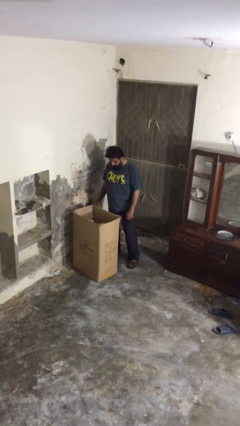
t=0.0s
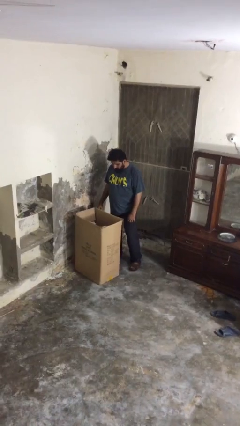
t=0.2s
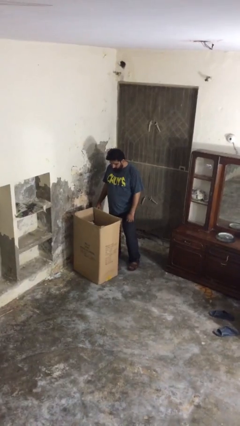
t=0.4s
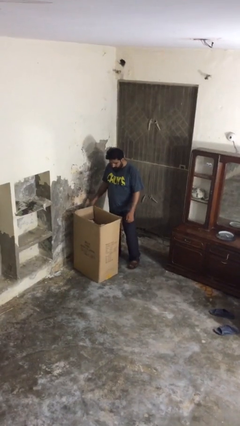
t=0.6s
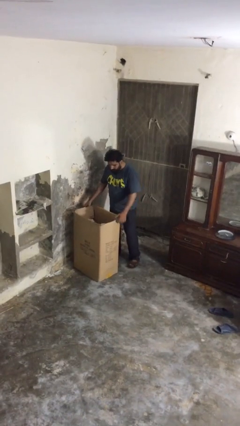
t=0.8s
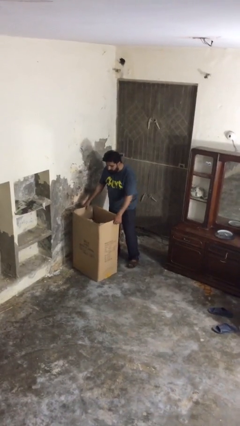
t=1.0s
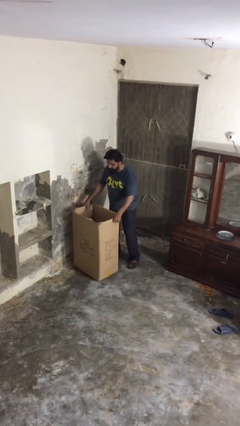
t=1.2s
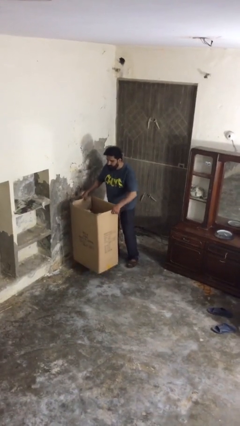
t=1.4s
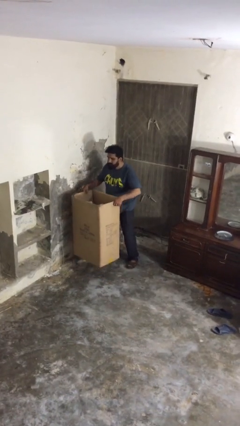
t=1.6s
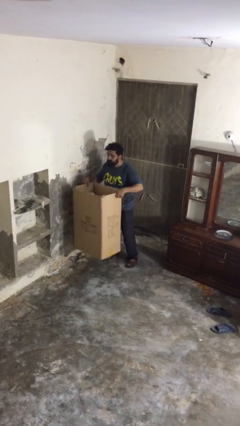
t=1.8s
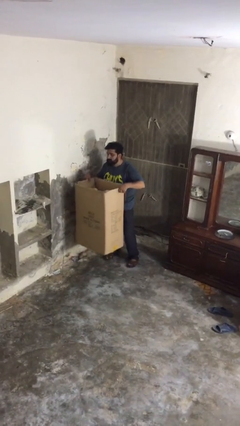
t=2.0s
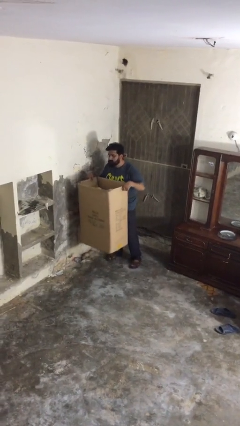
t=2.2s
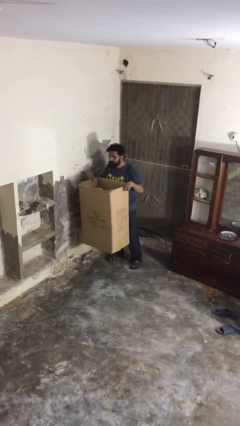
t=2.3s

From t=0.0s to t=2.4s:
person picks up object from floor

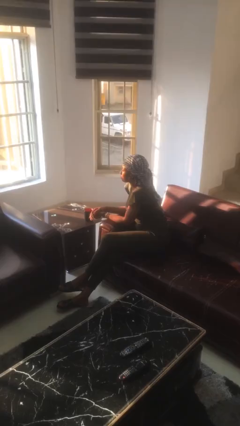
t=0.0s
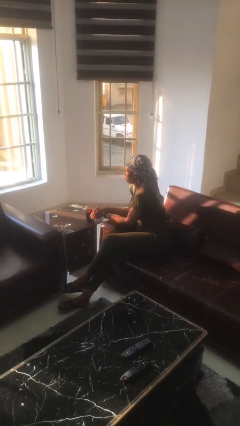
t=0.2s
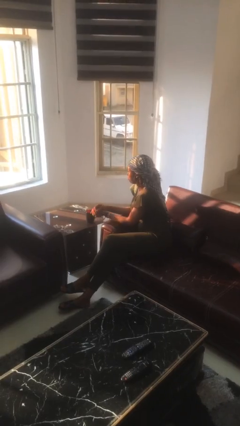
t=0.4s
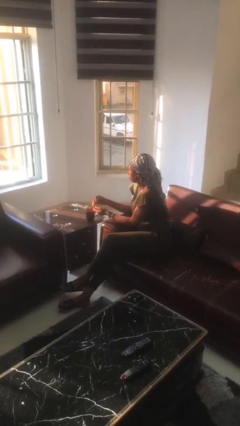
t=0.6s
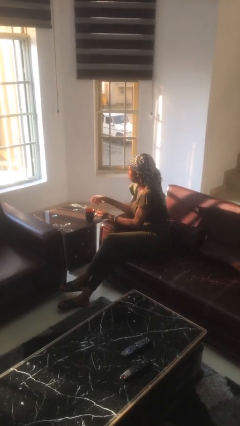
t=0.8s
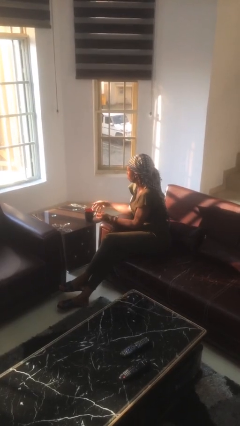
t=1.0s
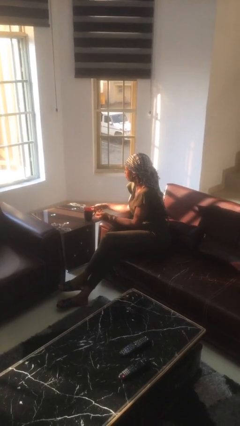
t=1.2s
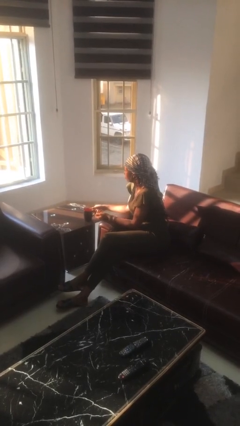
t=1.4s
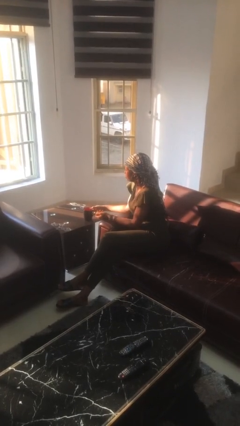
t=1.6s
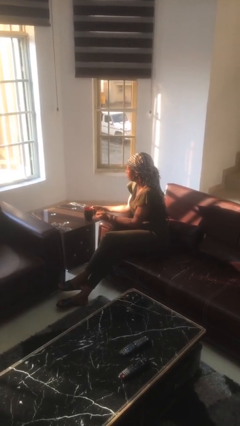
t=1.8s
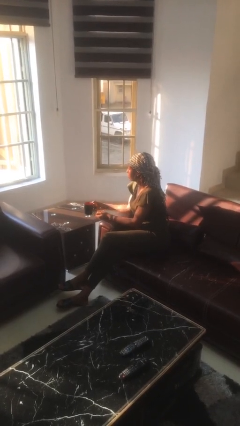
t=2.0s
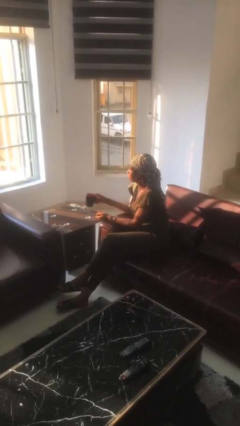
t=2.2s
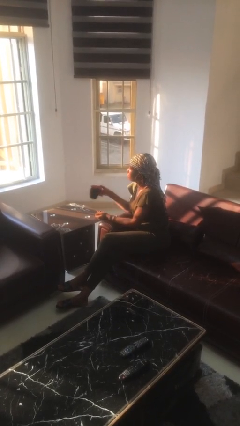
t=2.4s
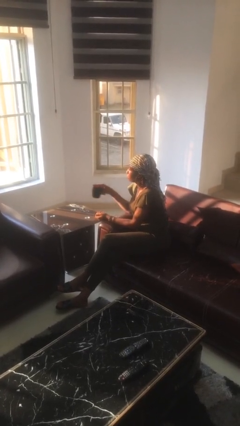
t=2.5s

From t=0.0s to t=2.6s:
person picks up object from table

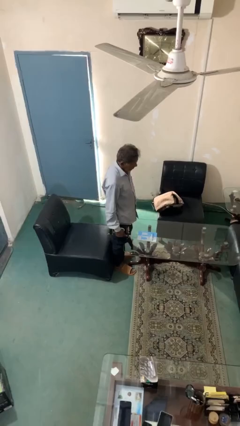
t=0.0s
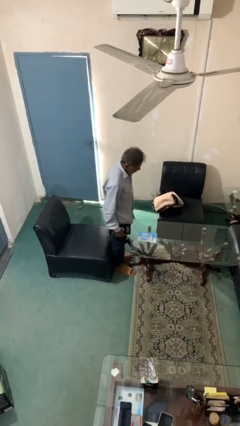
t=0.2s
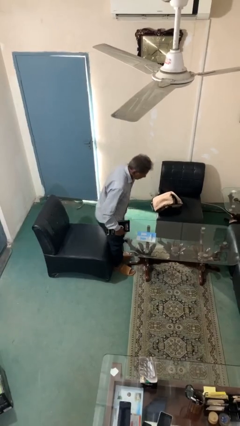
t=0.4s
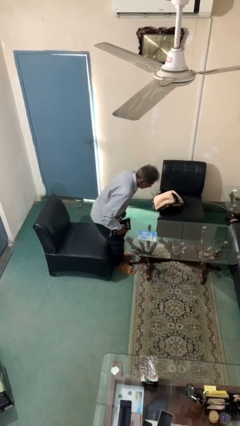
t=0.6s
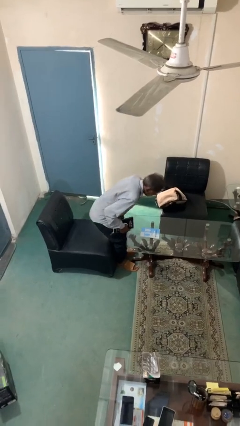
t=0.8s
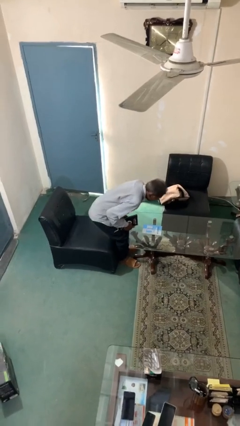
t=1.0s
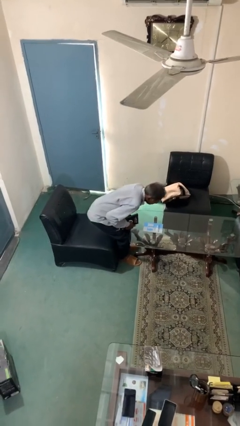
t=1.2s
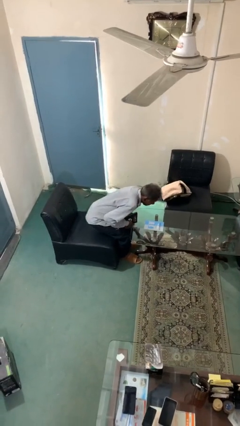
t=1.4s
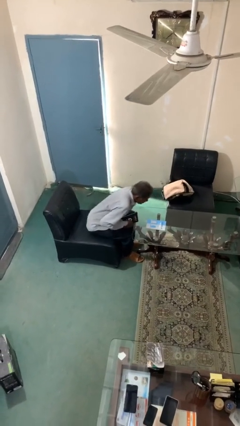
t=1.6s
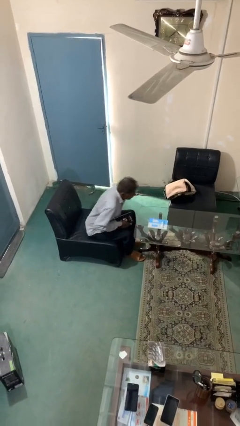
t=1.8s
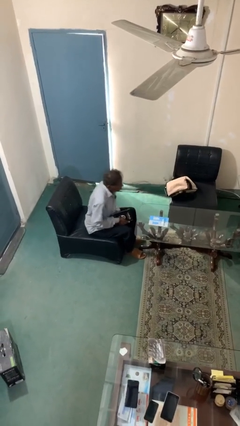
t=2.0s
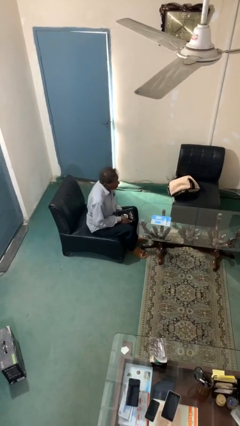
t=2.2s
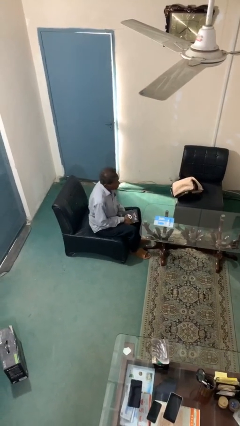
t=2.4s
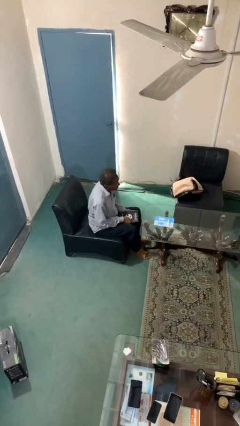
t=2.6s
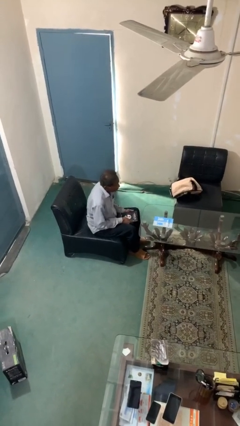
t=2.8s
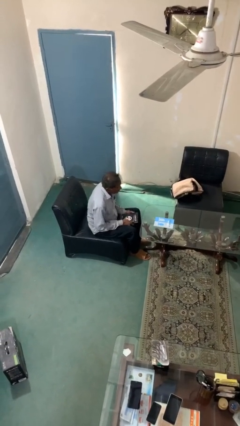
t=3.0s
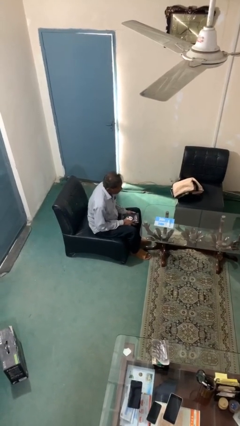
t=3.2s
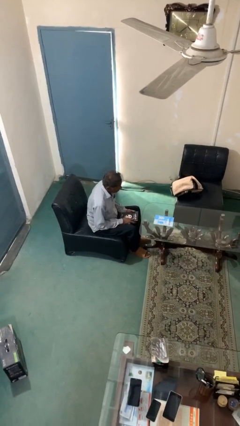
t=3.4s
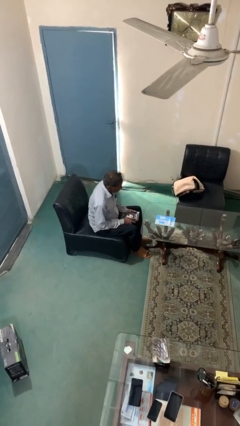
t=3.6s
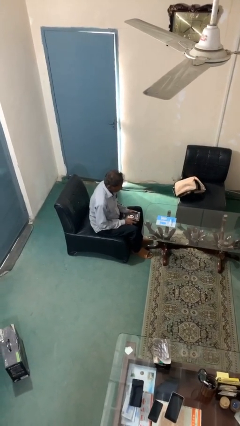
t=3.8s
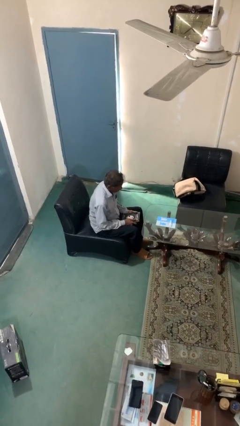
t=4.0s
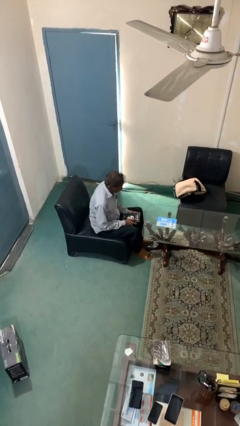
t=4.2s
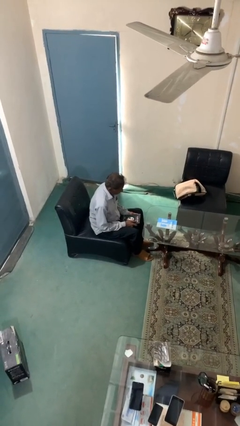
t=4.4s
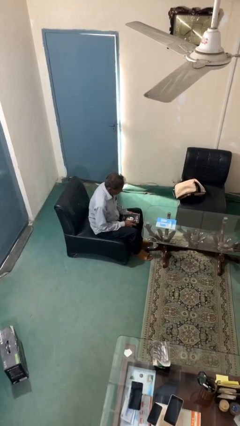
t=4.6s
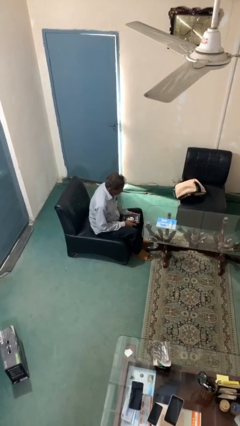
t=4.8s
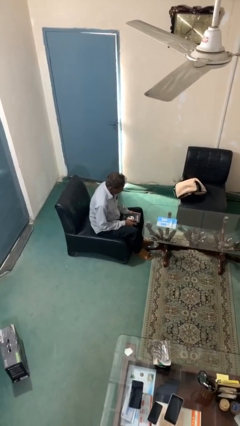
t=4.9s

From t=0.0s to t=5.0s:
person sits down

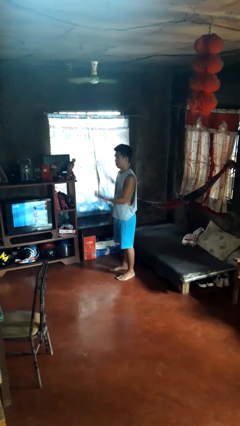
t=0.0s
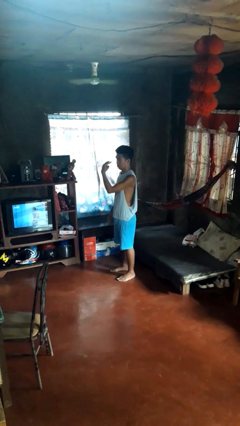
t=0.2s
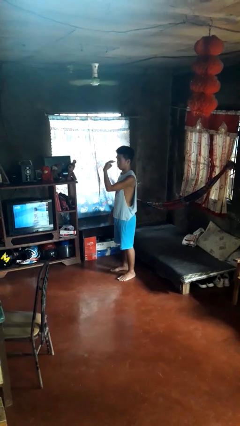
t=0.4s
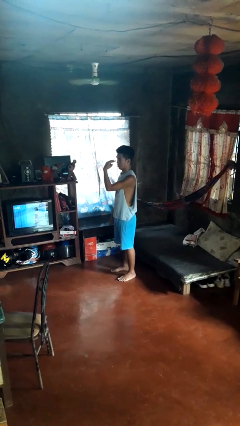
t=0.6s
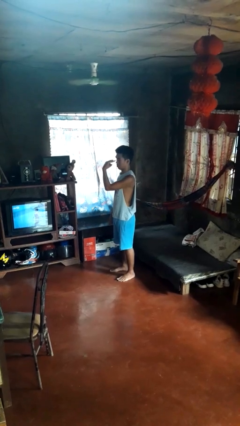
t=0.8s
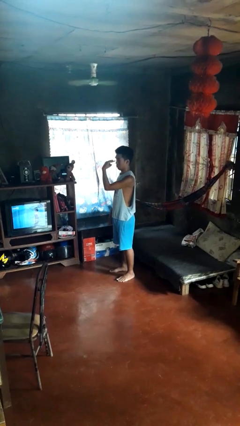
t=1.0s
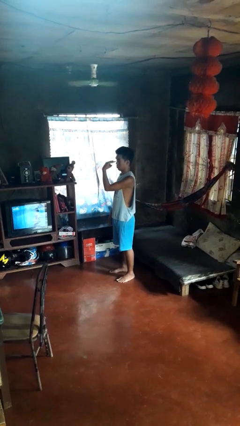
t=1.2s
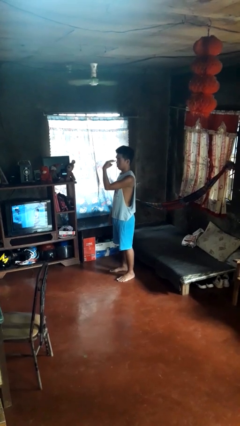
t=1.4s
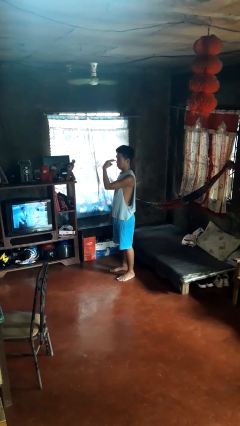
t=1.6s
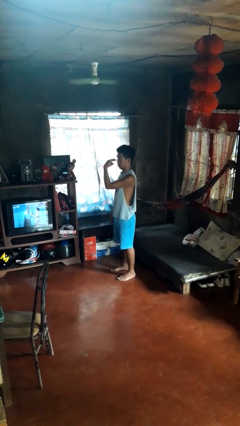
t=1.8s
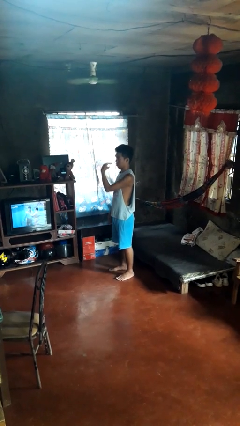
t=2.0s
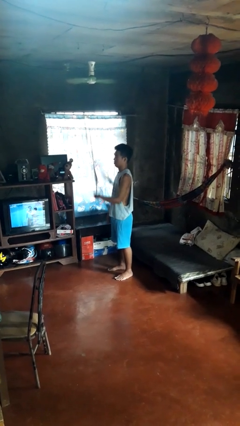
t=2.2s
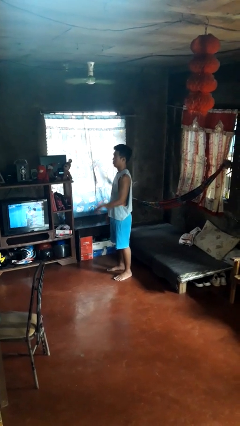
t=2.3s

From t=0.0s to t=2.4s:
person gestures watch closely

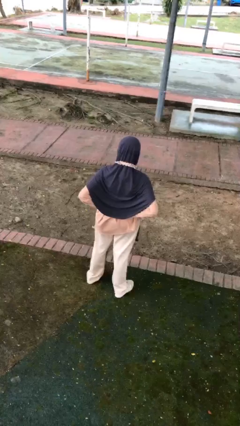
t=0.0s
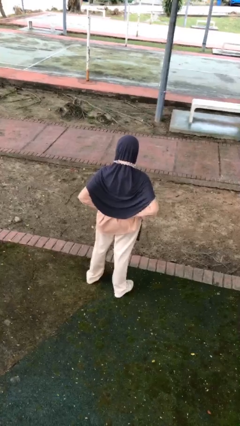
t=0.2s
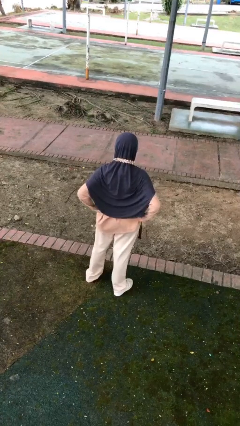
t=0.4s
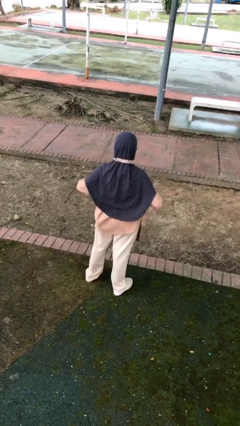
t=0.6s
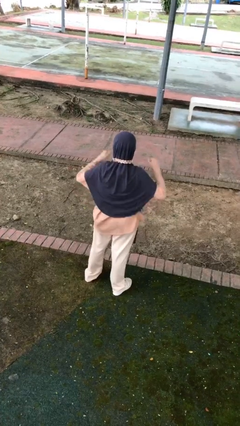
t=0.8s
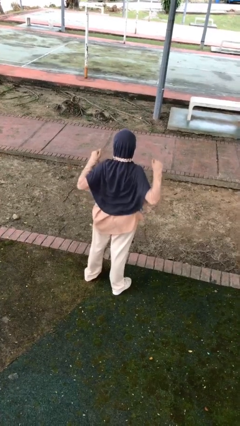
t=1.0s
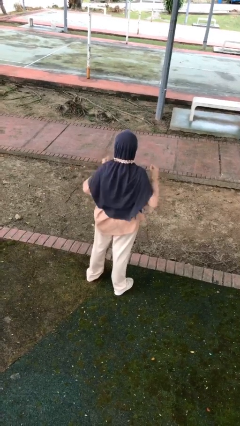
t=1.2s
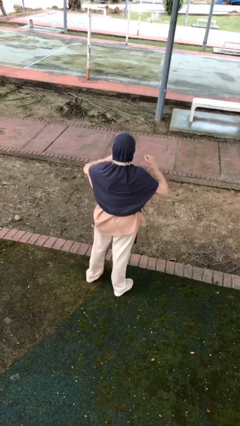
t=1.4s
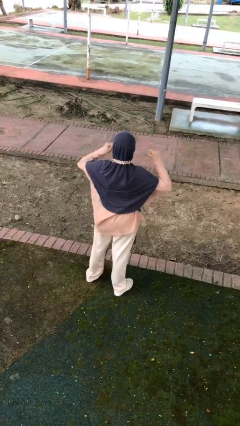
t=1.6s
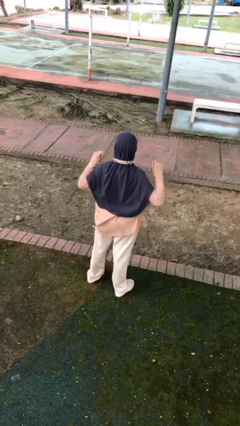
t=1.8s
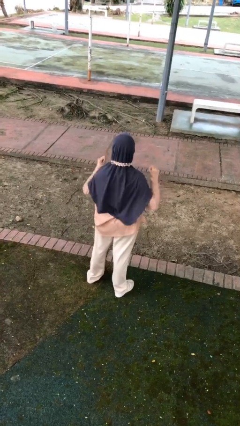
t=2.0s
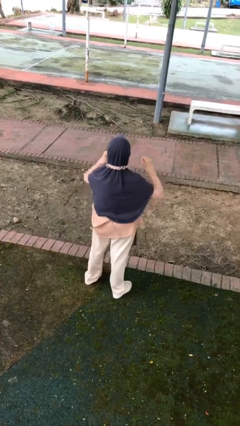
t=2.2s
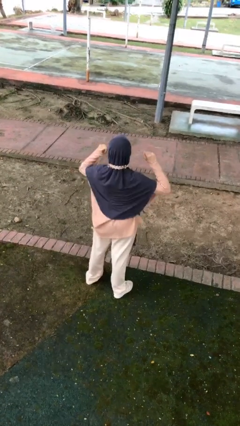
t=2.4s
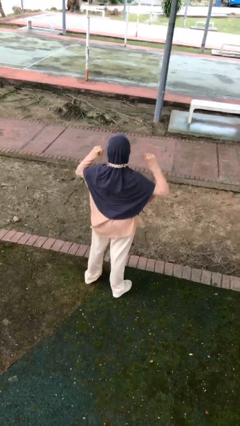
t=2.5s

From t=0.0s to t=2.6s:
person stretches arms to side

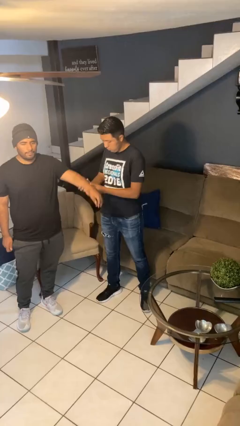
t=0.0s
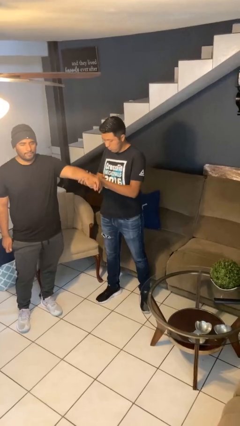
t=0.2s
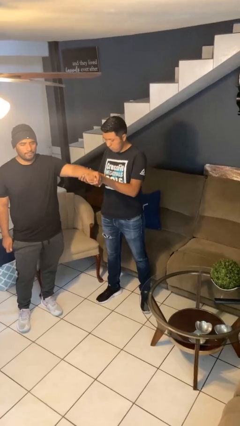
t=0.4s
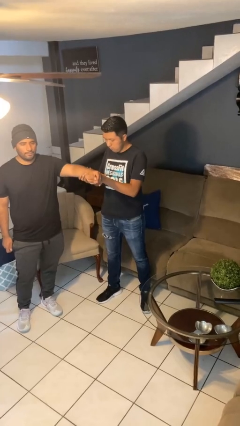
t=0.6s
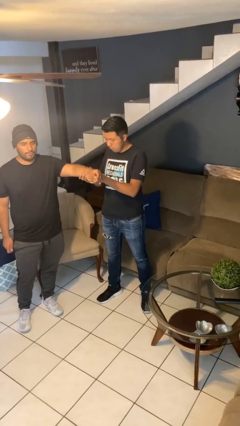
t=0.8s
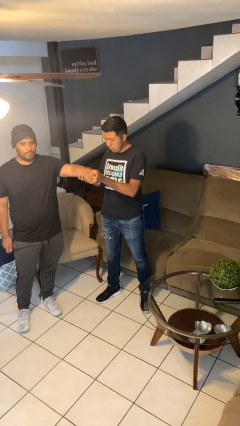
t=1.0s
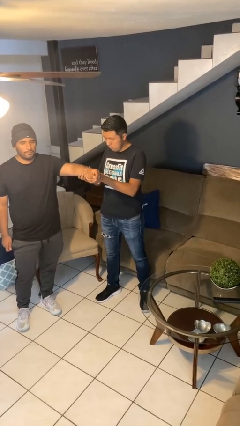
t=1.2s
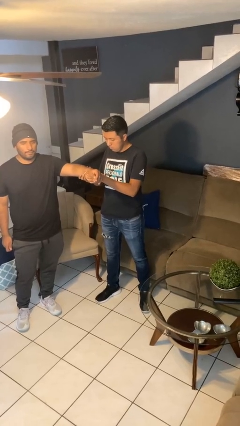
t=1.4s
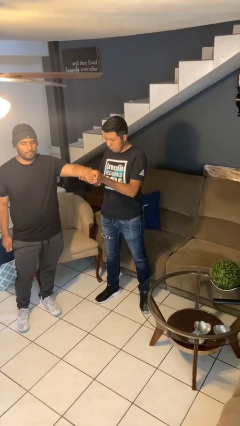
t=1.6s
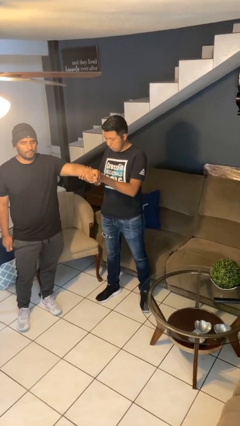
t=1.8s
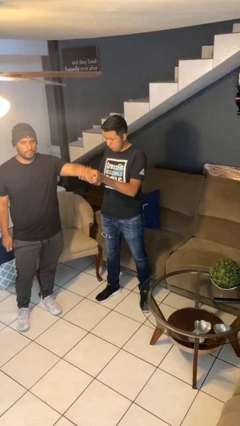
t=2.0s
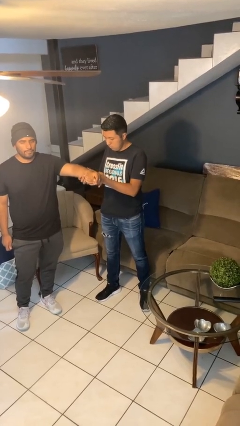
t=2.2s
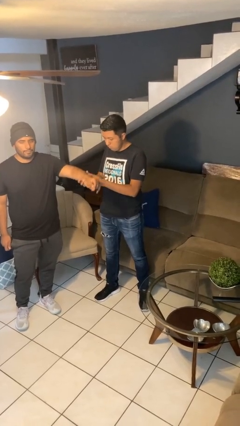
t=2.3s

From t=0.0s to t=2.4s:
person grabs person by forearm
